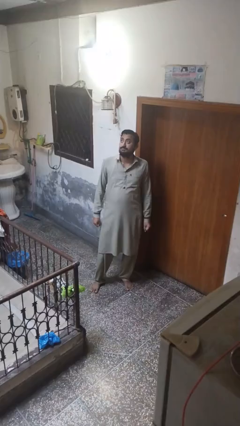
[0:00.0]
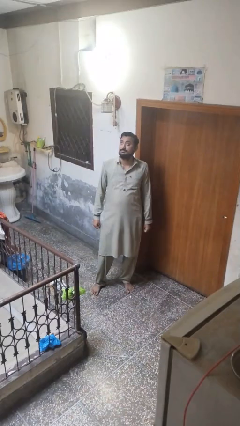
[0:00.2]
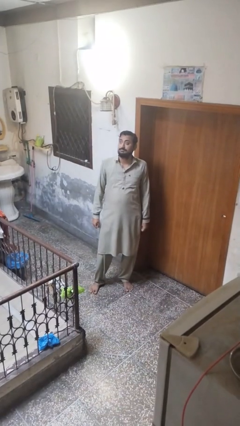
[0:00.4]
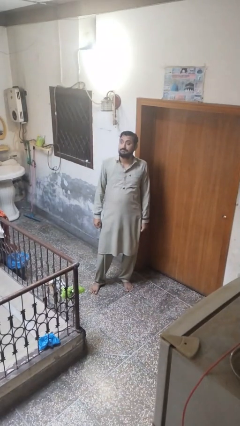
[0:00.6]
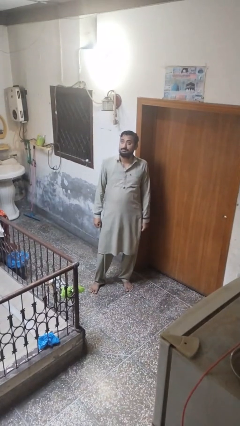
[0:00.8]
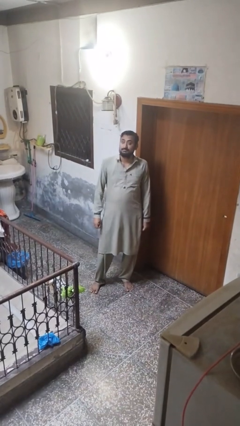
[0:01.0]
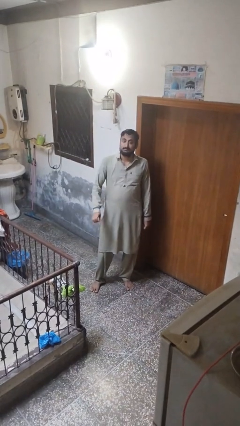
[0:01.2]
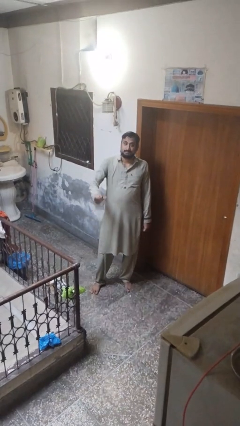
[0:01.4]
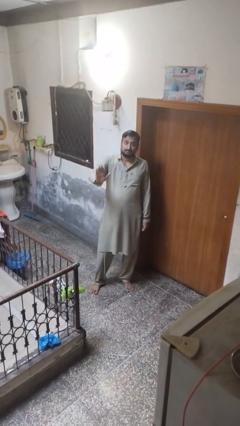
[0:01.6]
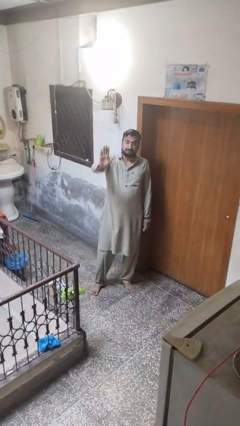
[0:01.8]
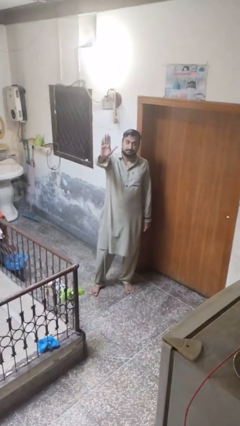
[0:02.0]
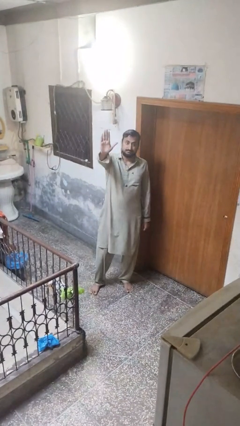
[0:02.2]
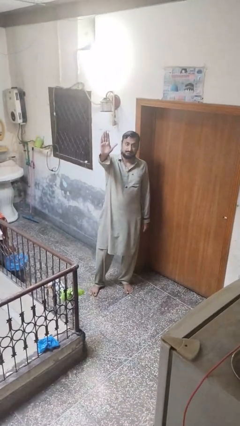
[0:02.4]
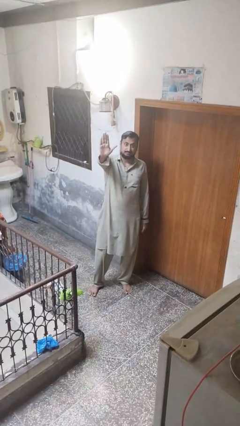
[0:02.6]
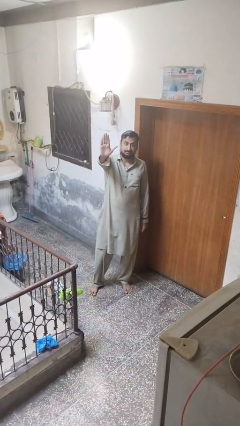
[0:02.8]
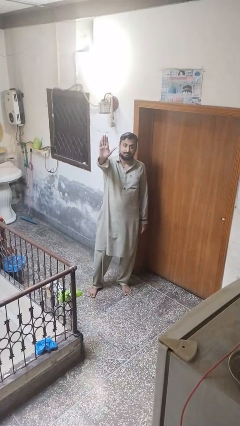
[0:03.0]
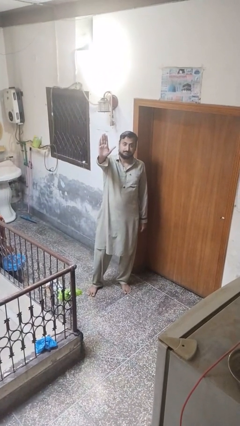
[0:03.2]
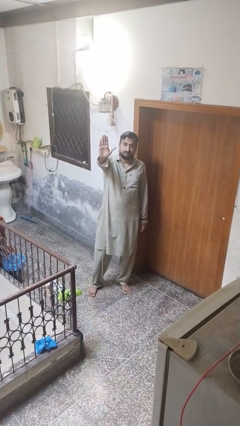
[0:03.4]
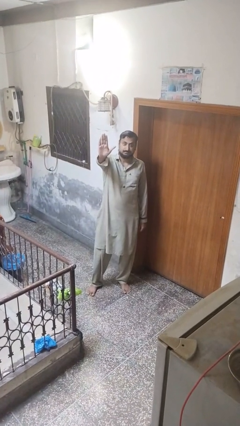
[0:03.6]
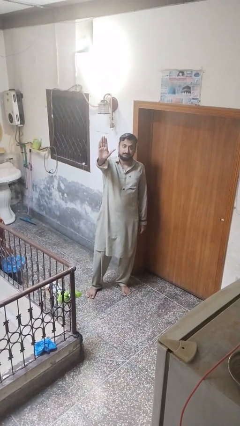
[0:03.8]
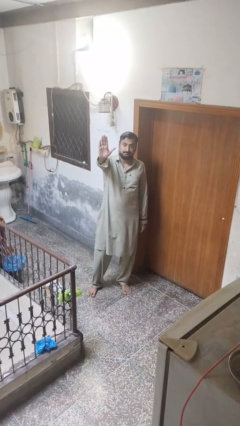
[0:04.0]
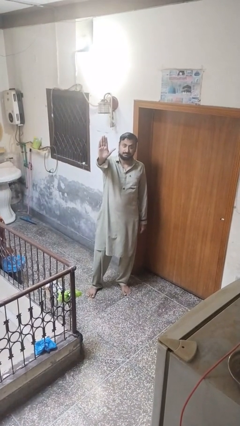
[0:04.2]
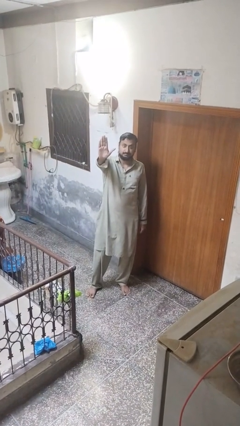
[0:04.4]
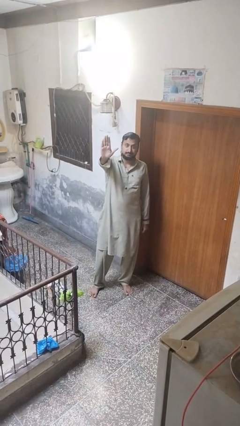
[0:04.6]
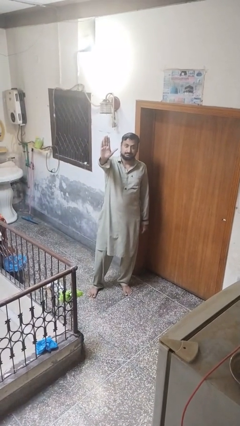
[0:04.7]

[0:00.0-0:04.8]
person gestures stop

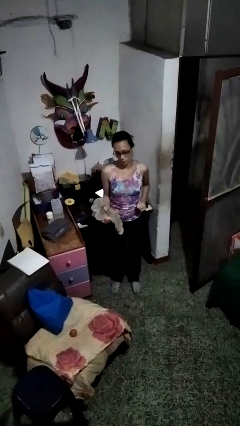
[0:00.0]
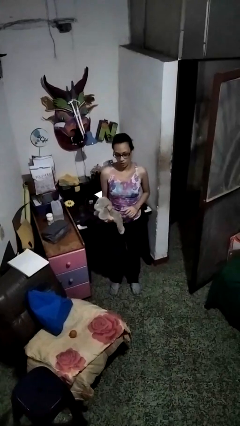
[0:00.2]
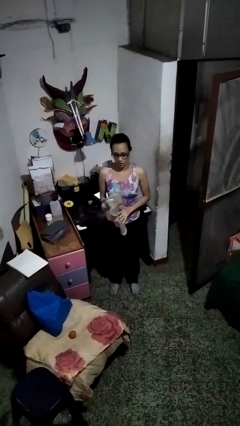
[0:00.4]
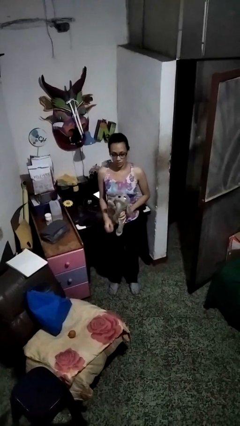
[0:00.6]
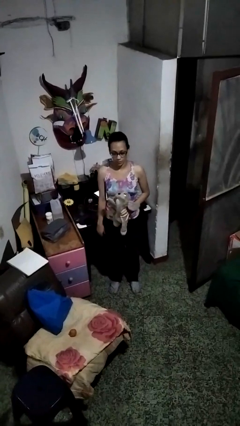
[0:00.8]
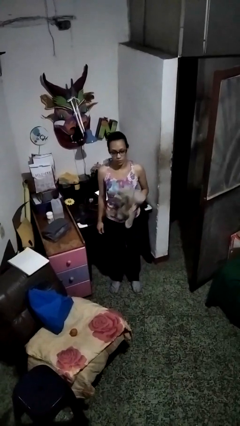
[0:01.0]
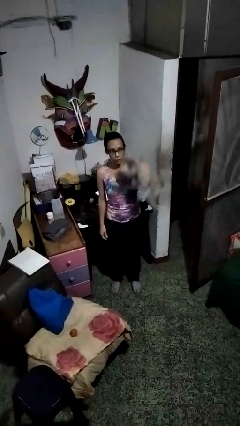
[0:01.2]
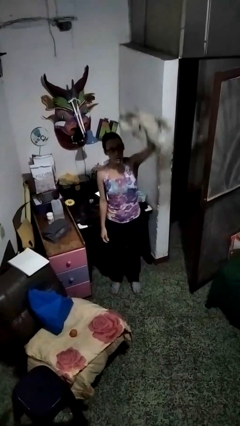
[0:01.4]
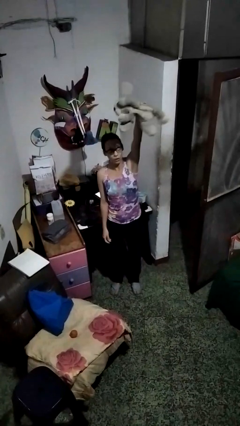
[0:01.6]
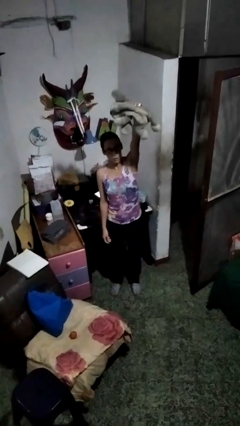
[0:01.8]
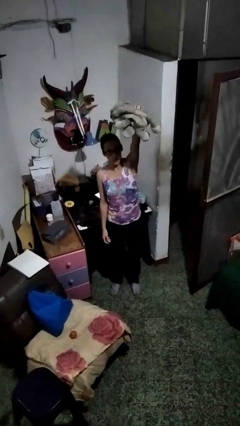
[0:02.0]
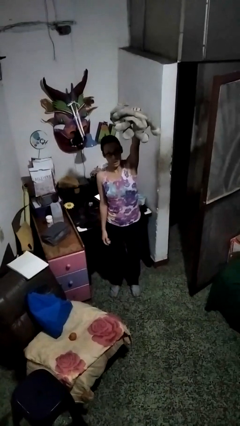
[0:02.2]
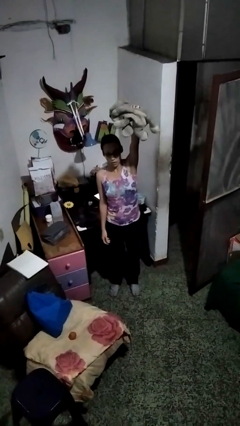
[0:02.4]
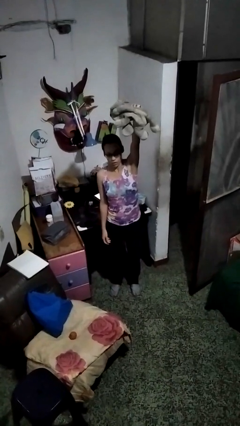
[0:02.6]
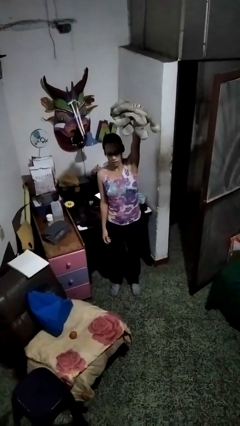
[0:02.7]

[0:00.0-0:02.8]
person drops object

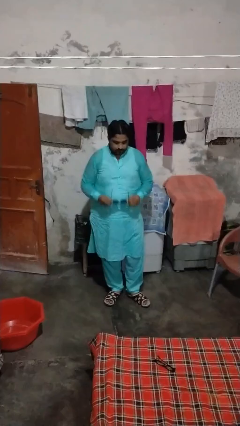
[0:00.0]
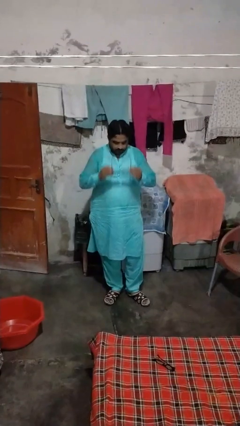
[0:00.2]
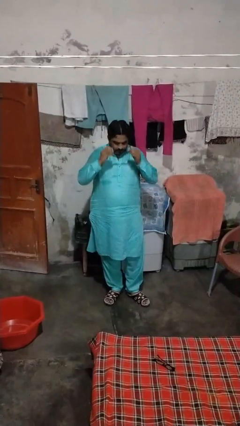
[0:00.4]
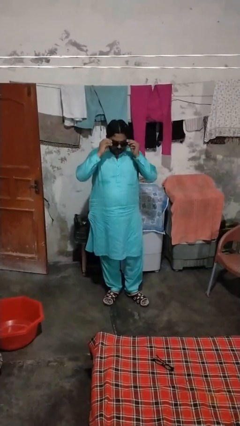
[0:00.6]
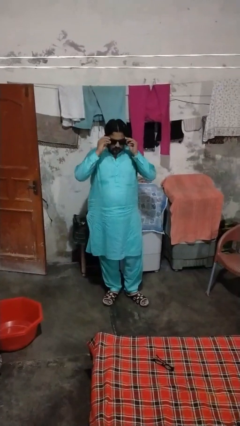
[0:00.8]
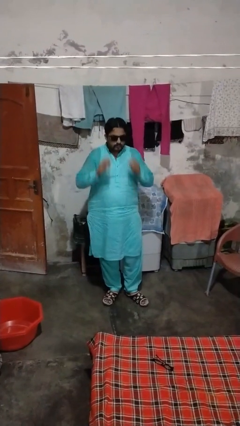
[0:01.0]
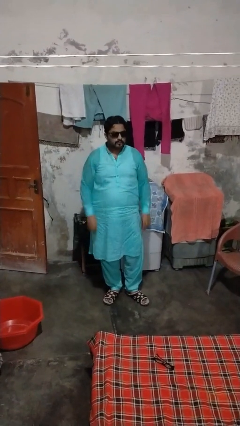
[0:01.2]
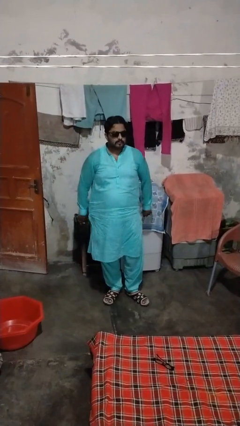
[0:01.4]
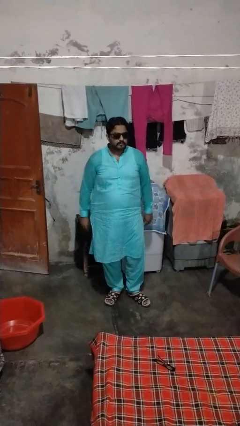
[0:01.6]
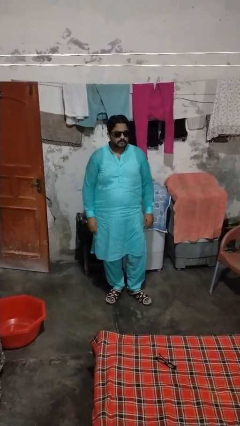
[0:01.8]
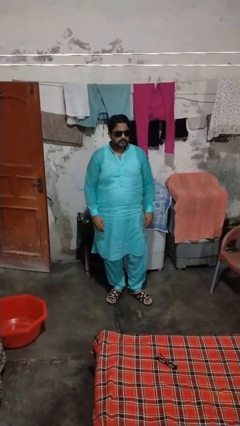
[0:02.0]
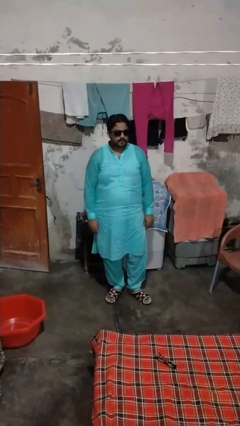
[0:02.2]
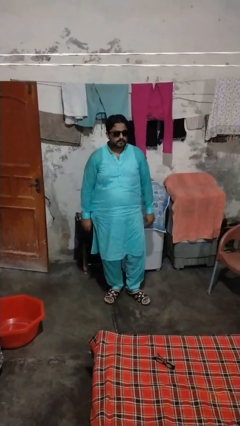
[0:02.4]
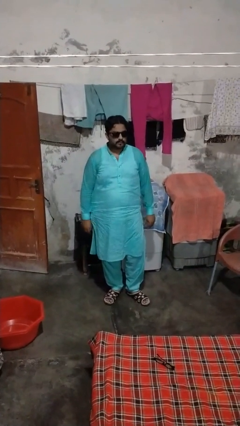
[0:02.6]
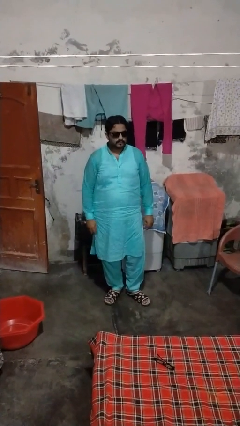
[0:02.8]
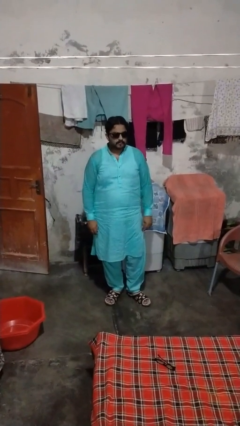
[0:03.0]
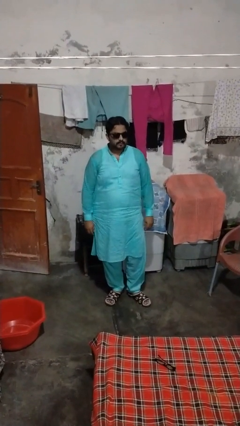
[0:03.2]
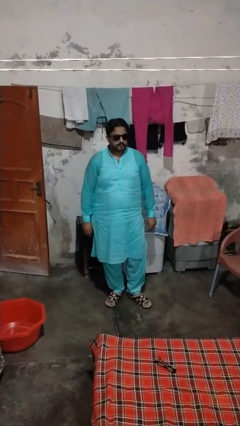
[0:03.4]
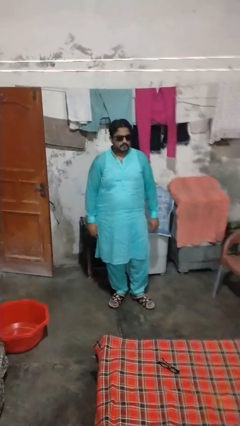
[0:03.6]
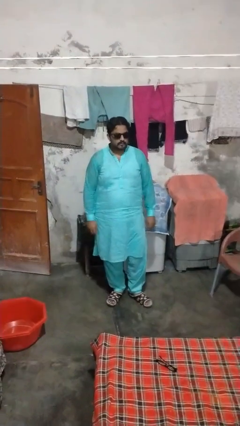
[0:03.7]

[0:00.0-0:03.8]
person puts on sunglasses

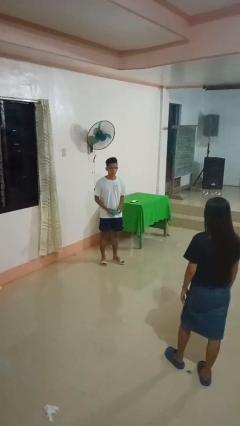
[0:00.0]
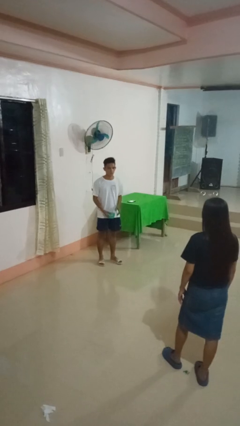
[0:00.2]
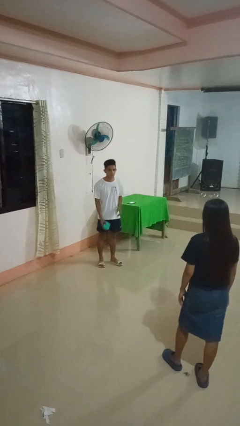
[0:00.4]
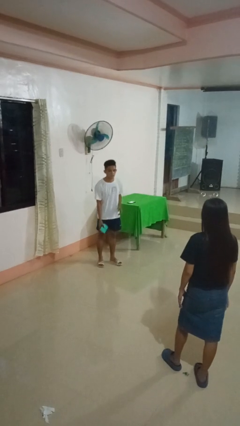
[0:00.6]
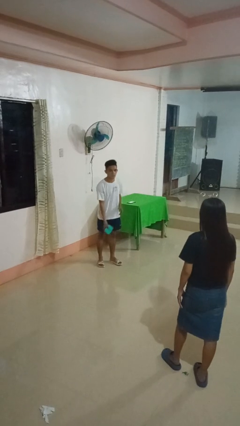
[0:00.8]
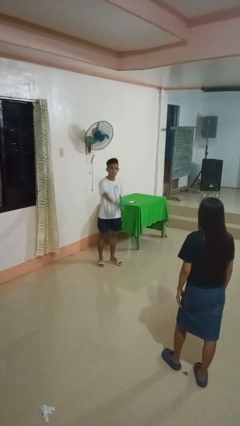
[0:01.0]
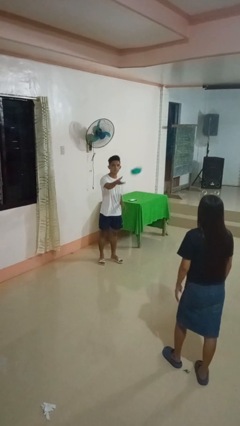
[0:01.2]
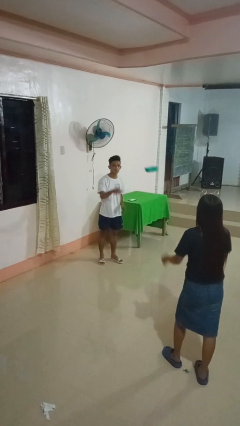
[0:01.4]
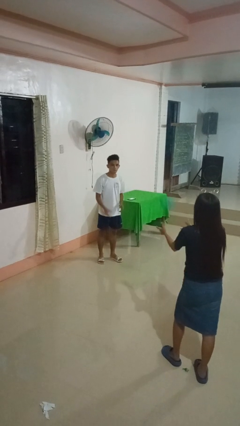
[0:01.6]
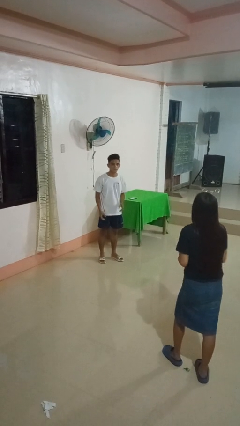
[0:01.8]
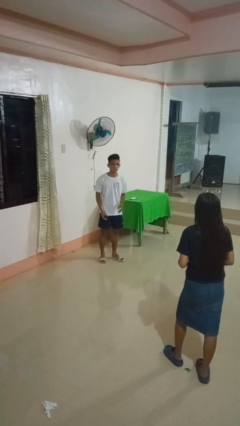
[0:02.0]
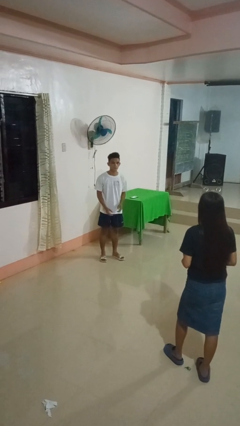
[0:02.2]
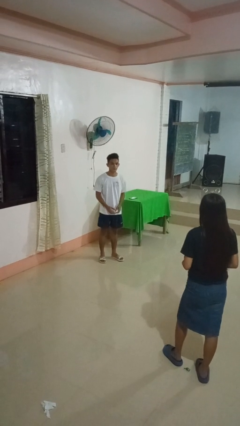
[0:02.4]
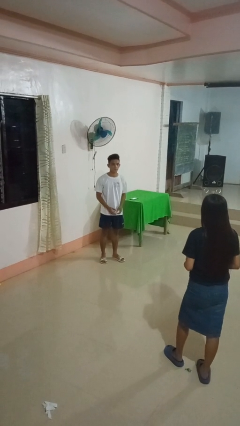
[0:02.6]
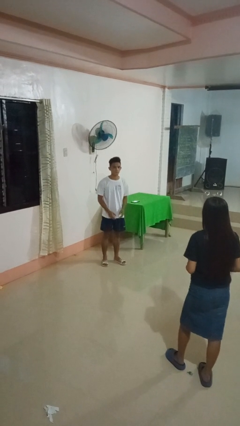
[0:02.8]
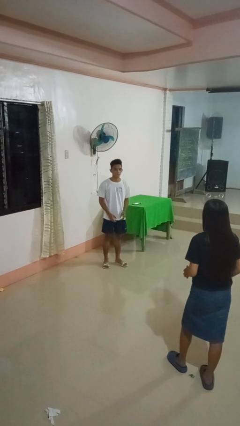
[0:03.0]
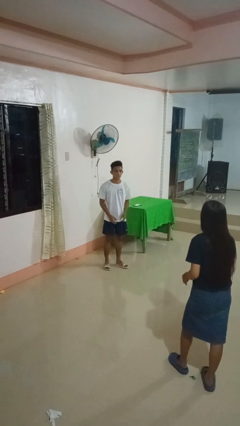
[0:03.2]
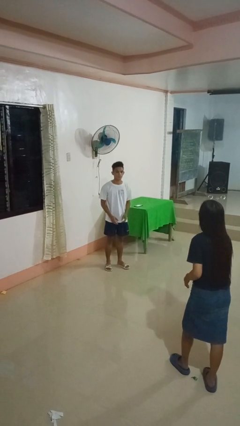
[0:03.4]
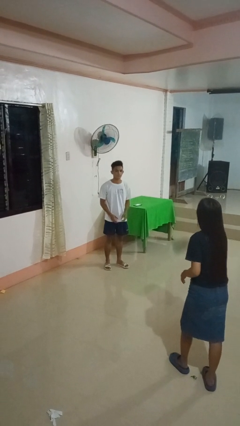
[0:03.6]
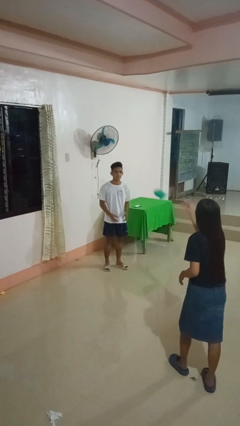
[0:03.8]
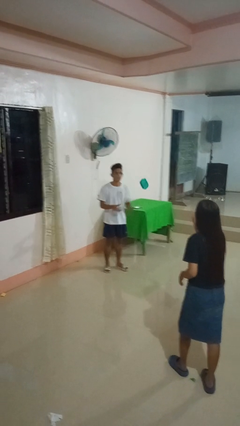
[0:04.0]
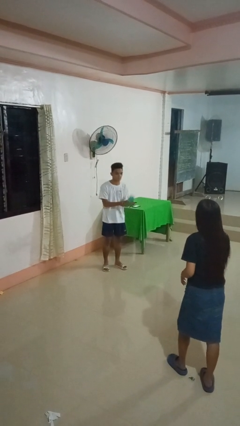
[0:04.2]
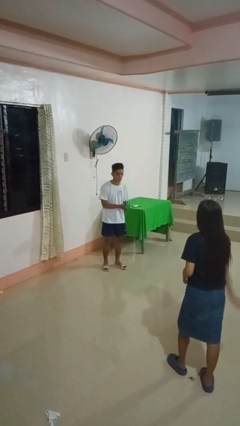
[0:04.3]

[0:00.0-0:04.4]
person throws object to person

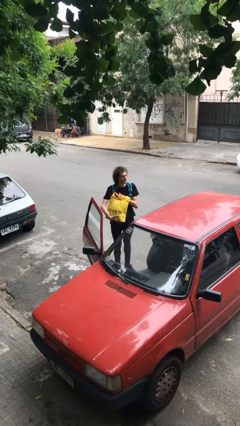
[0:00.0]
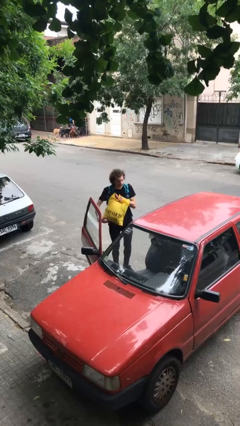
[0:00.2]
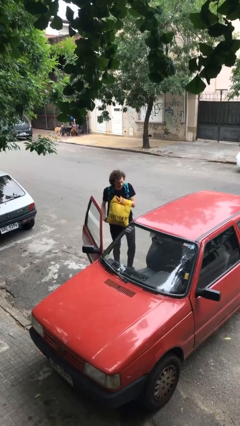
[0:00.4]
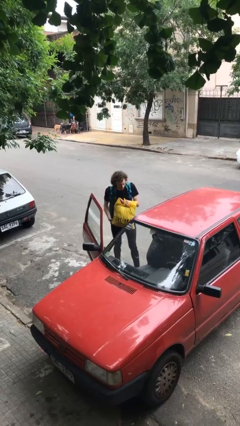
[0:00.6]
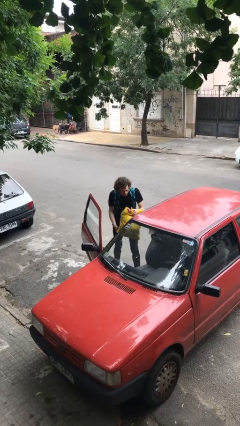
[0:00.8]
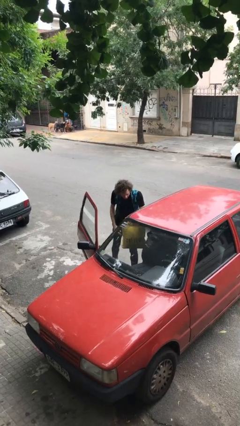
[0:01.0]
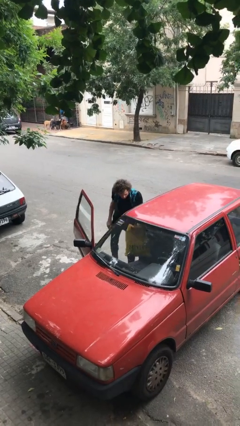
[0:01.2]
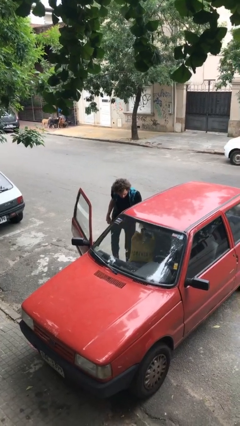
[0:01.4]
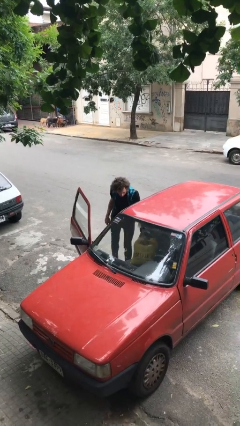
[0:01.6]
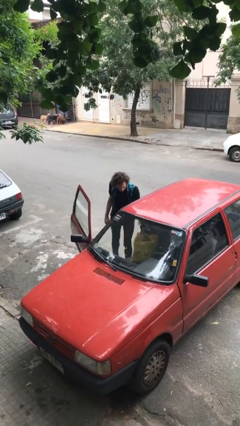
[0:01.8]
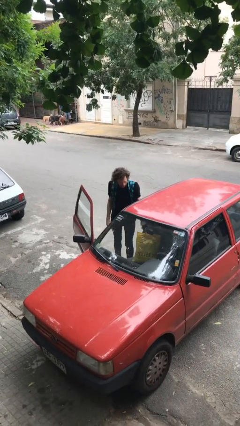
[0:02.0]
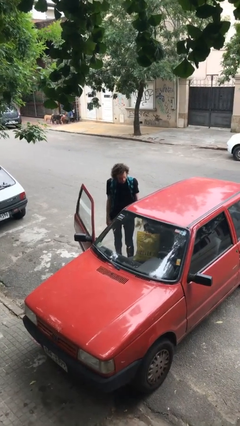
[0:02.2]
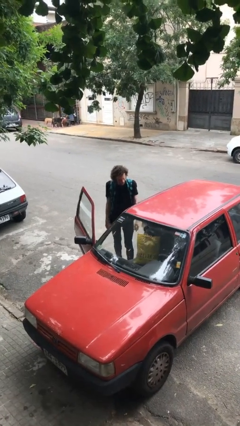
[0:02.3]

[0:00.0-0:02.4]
person loads car
